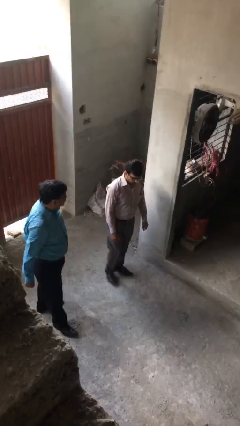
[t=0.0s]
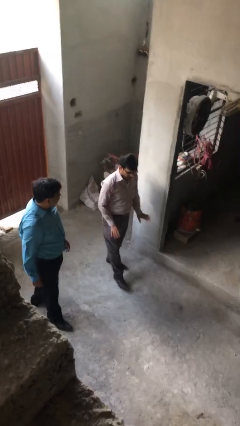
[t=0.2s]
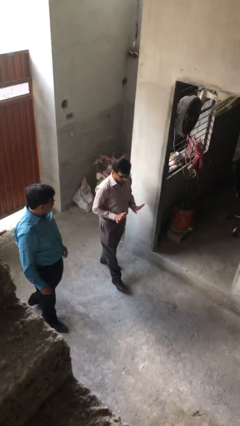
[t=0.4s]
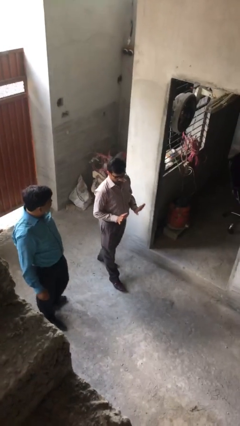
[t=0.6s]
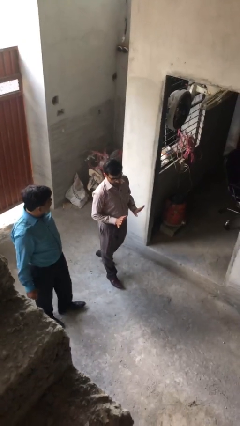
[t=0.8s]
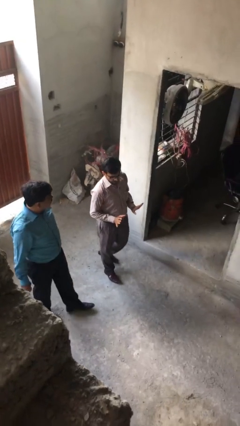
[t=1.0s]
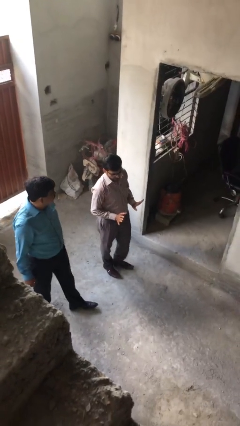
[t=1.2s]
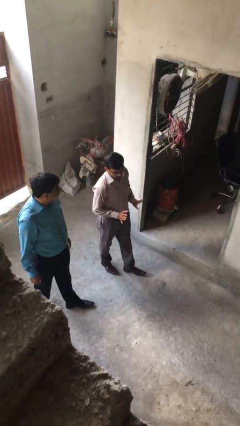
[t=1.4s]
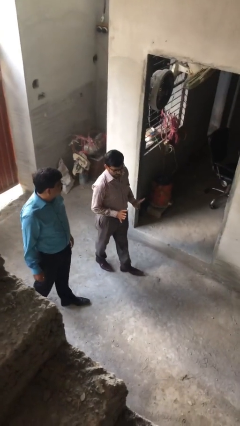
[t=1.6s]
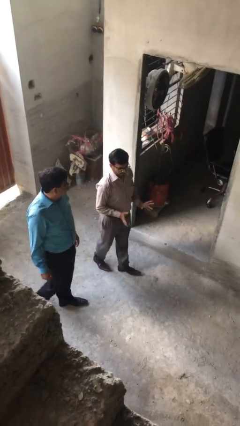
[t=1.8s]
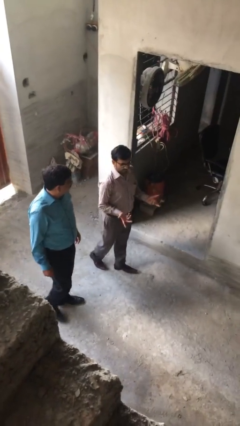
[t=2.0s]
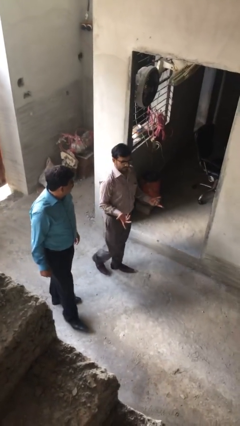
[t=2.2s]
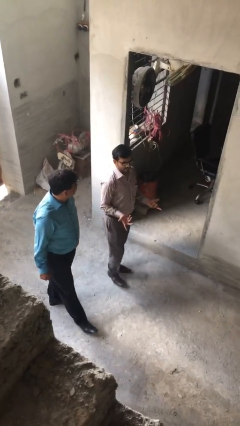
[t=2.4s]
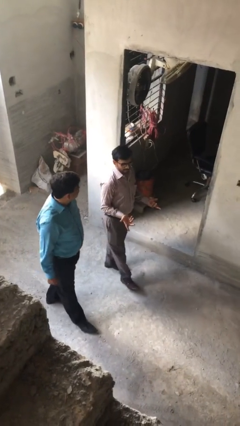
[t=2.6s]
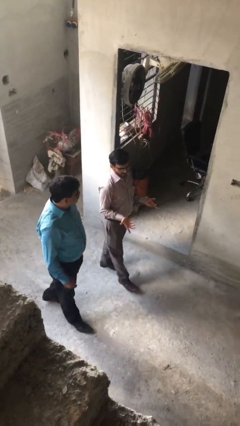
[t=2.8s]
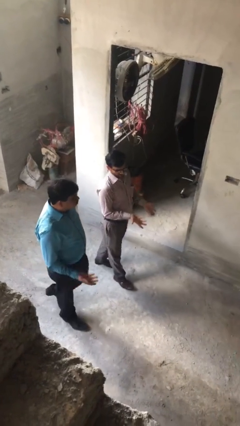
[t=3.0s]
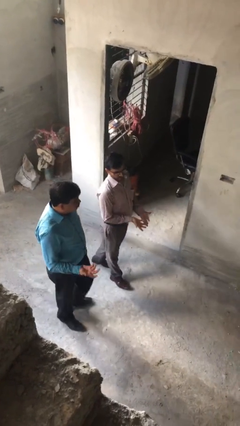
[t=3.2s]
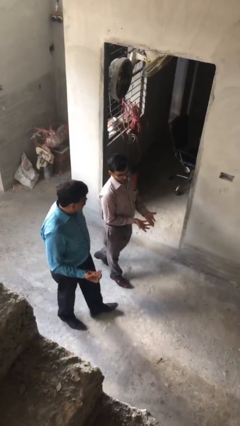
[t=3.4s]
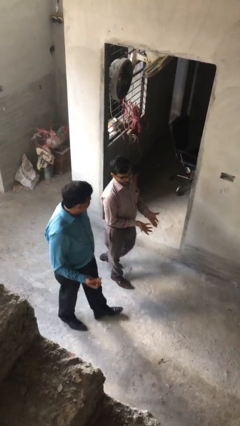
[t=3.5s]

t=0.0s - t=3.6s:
person talks to person

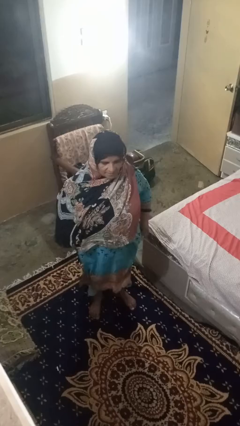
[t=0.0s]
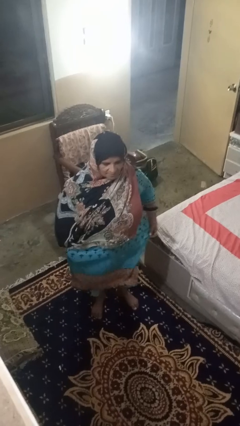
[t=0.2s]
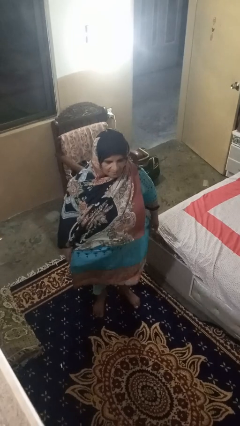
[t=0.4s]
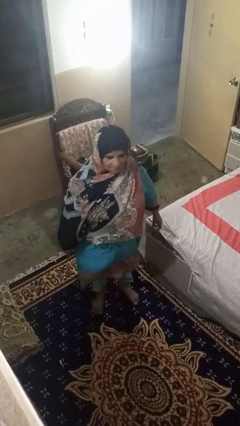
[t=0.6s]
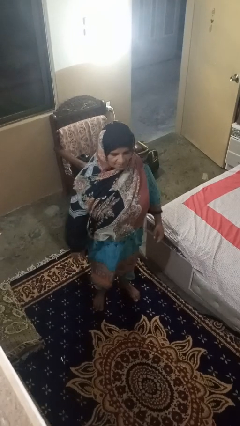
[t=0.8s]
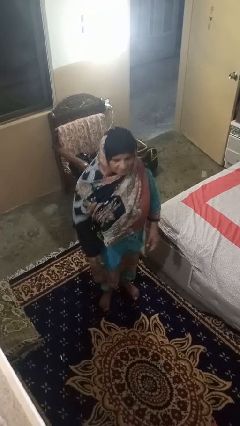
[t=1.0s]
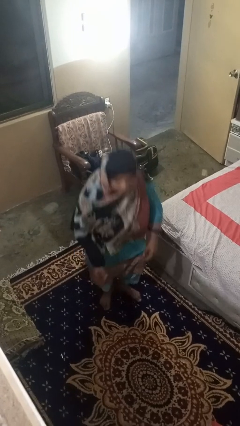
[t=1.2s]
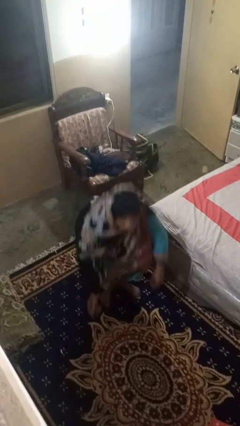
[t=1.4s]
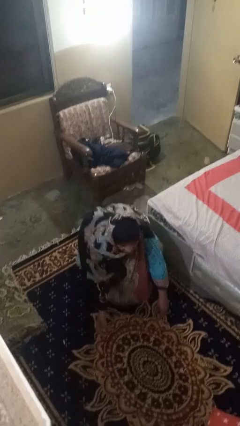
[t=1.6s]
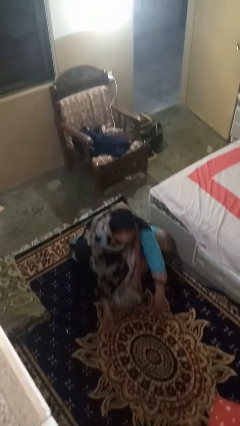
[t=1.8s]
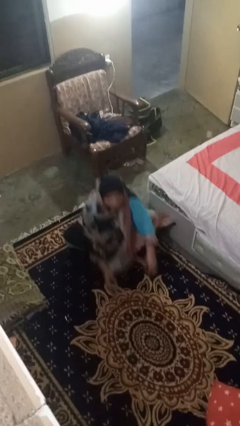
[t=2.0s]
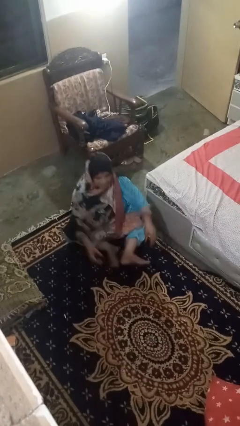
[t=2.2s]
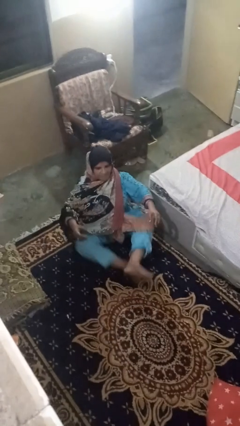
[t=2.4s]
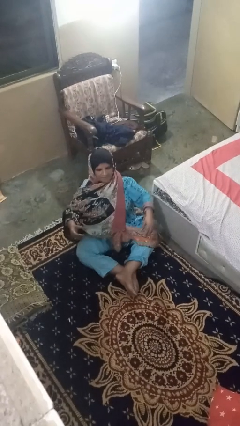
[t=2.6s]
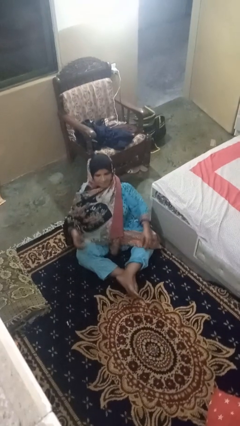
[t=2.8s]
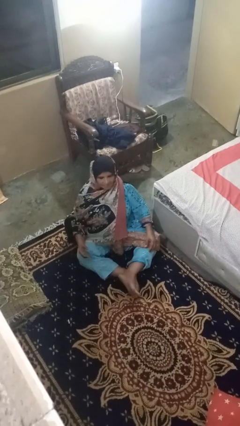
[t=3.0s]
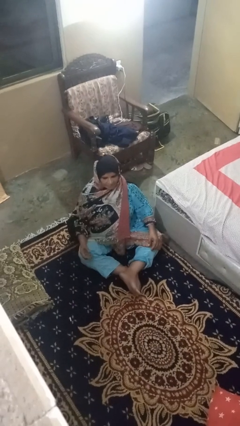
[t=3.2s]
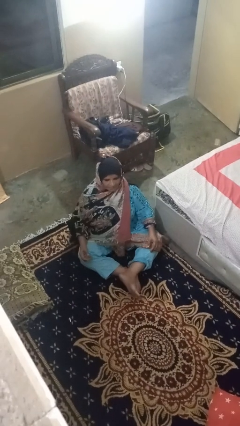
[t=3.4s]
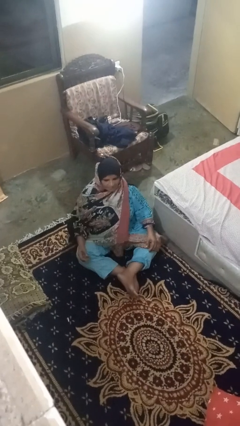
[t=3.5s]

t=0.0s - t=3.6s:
person sits crisscross

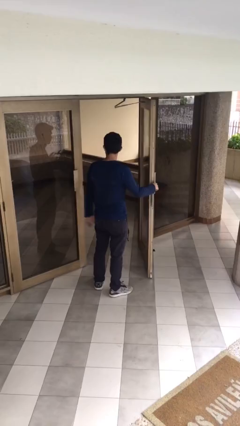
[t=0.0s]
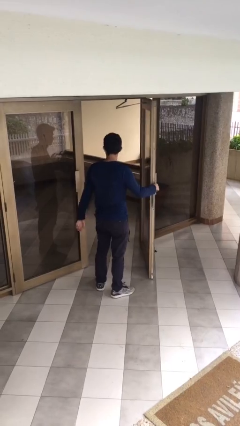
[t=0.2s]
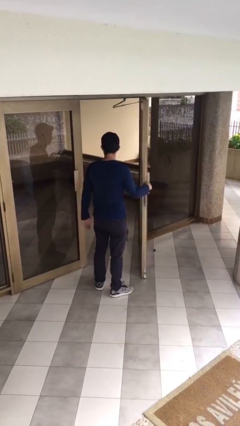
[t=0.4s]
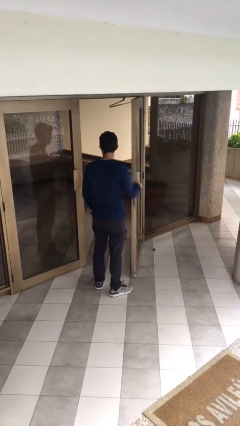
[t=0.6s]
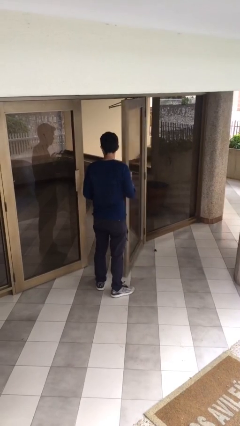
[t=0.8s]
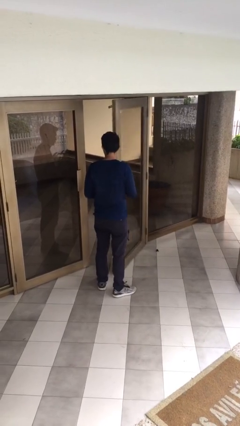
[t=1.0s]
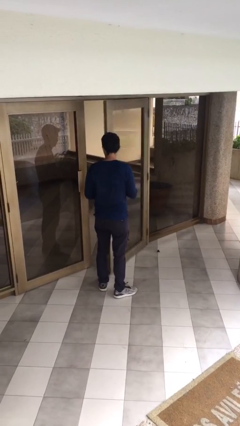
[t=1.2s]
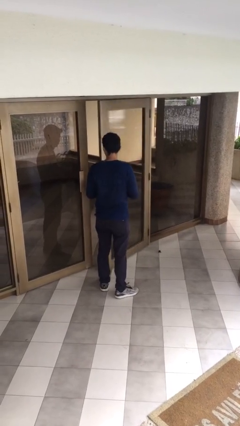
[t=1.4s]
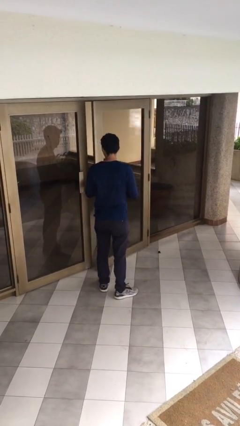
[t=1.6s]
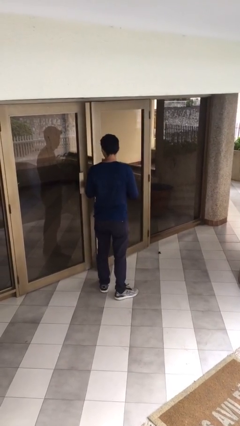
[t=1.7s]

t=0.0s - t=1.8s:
person closes facility door

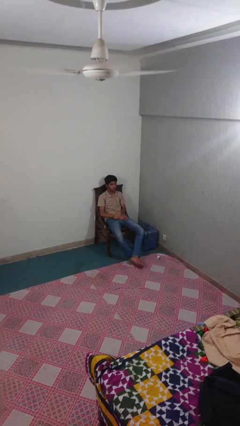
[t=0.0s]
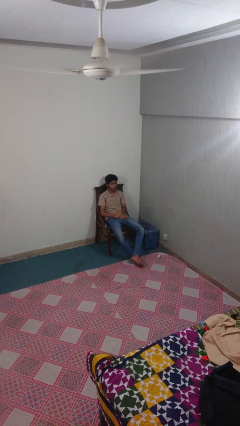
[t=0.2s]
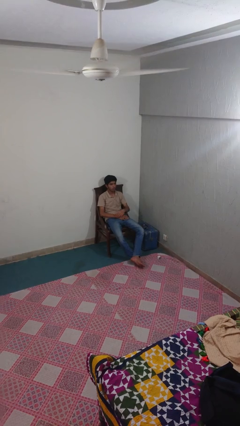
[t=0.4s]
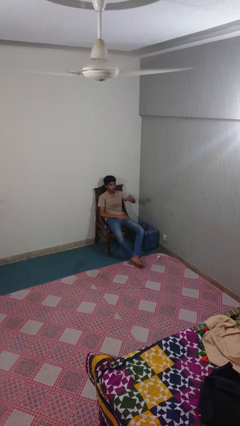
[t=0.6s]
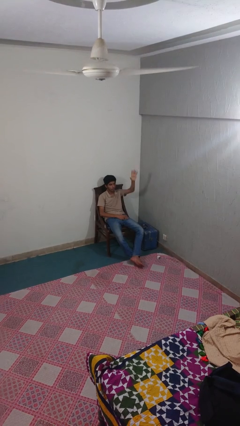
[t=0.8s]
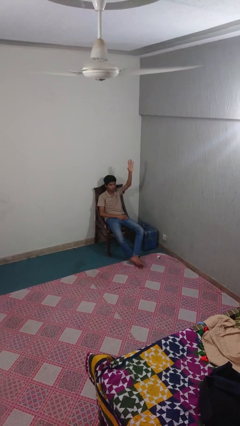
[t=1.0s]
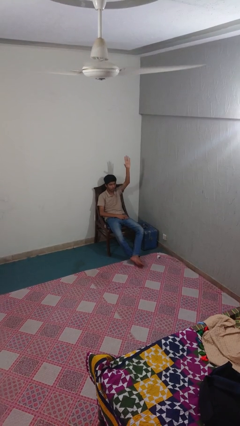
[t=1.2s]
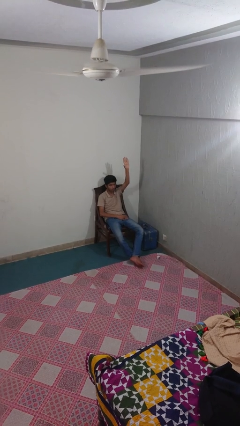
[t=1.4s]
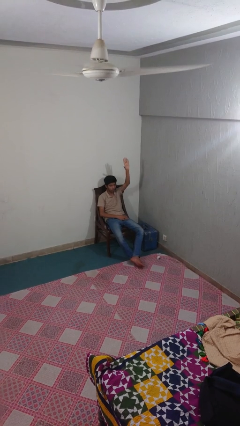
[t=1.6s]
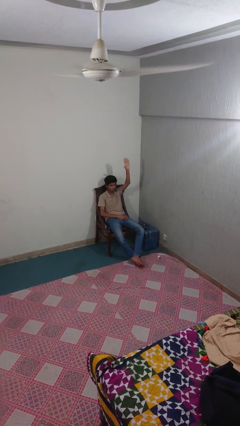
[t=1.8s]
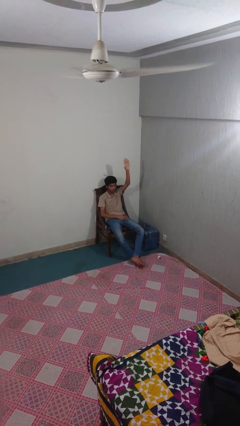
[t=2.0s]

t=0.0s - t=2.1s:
person gestures raise hand

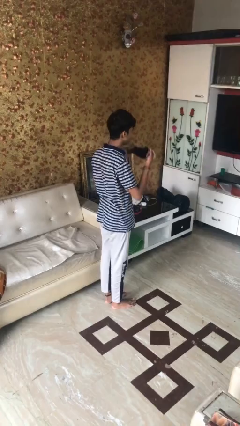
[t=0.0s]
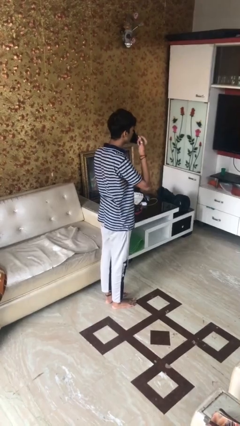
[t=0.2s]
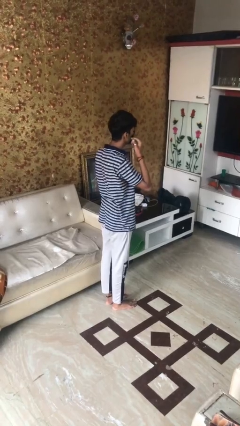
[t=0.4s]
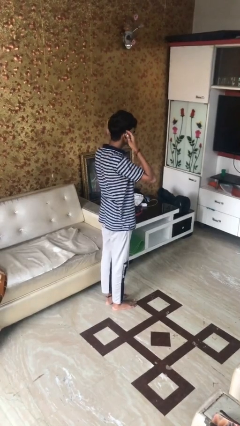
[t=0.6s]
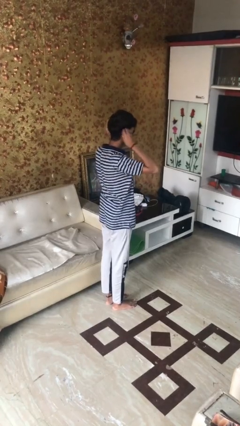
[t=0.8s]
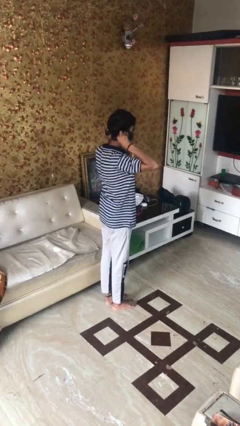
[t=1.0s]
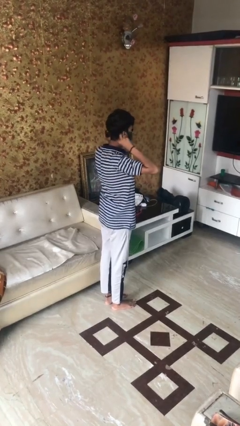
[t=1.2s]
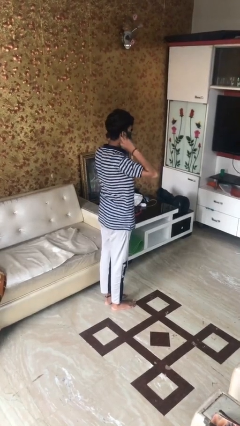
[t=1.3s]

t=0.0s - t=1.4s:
person puts on facemask

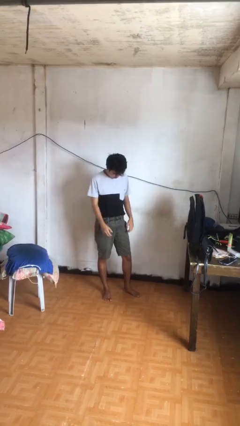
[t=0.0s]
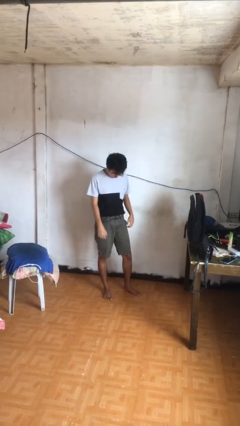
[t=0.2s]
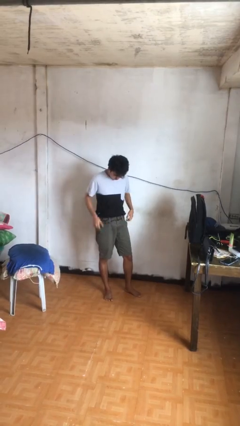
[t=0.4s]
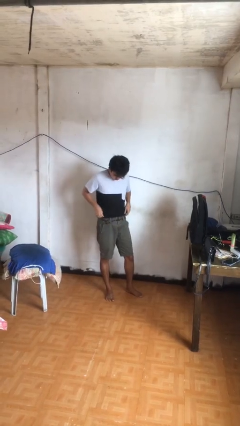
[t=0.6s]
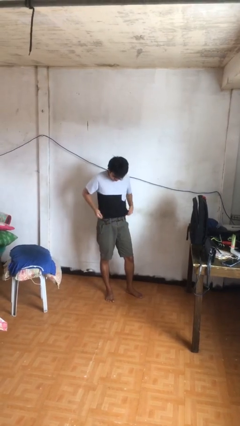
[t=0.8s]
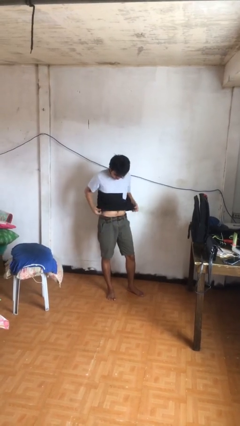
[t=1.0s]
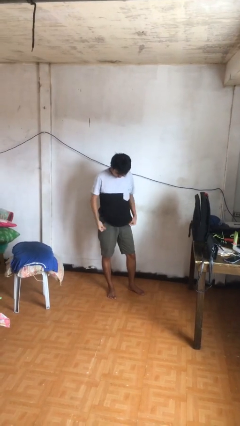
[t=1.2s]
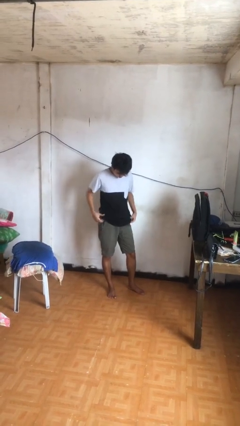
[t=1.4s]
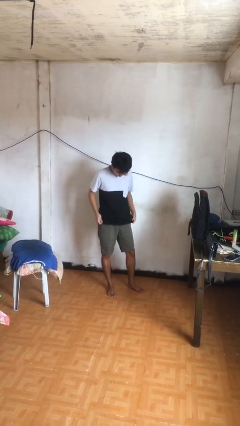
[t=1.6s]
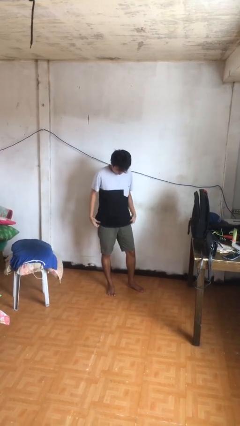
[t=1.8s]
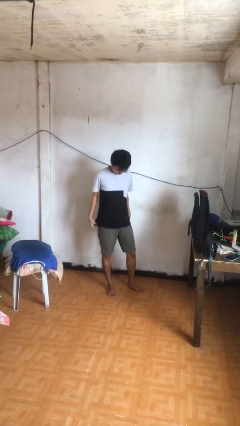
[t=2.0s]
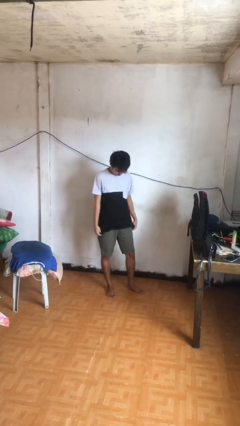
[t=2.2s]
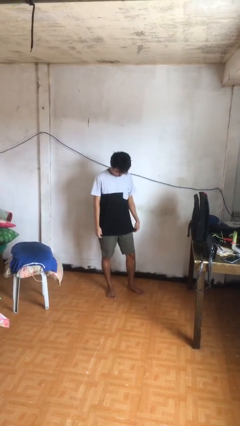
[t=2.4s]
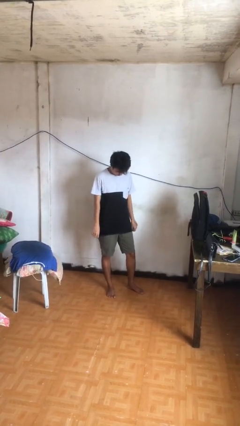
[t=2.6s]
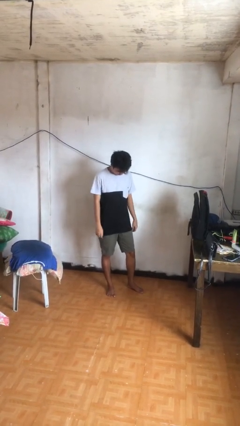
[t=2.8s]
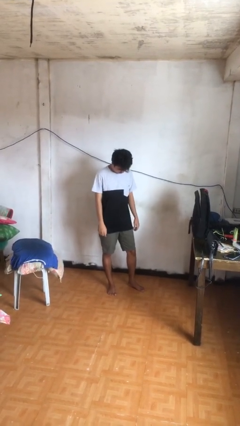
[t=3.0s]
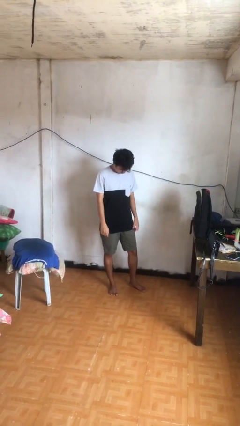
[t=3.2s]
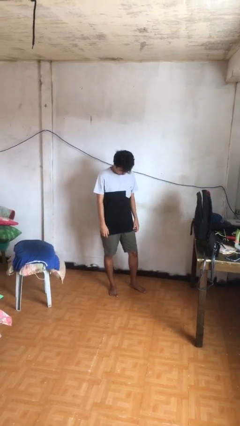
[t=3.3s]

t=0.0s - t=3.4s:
person untucks shirt

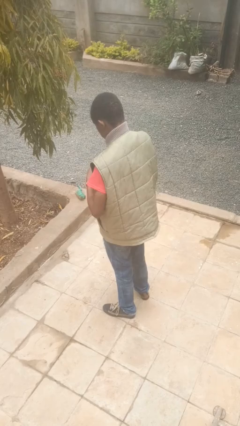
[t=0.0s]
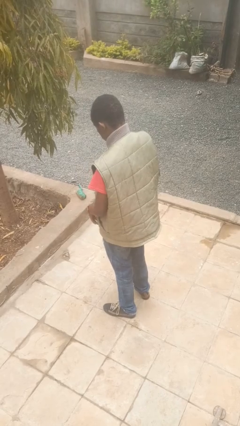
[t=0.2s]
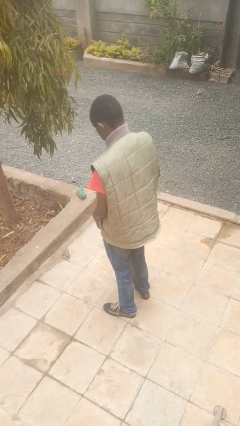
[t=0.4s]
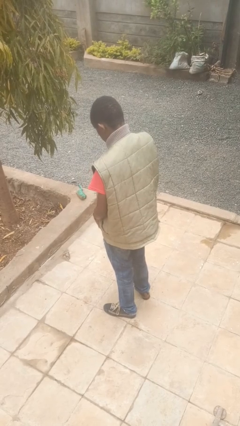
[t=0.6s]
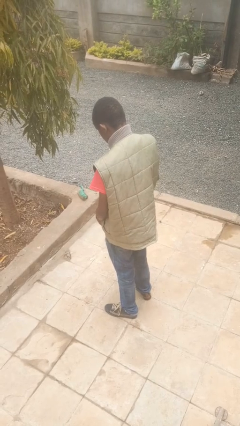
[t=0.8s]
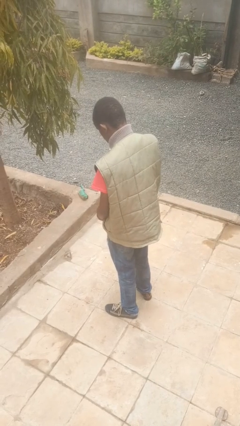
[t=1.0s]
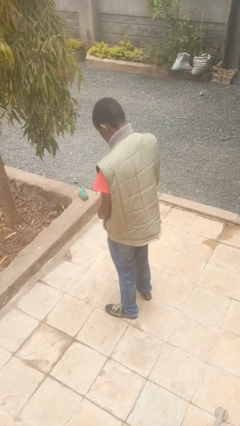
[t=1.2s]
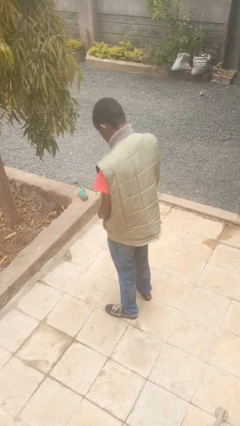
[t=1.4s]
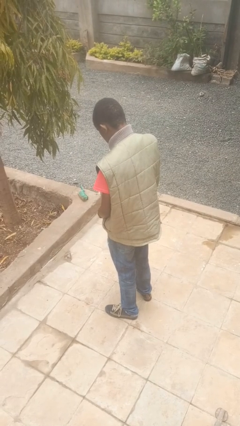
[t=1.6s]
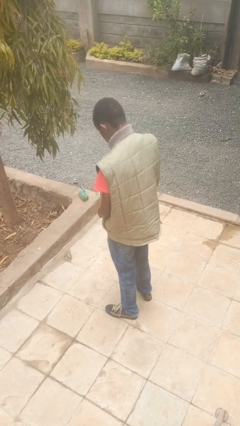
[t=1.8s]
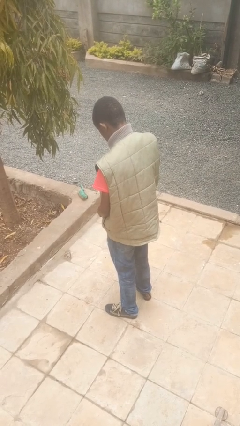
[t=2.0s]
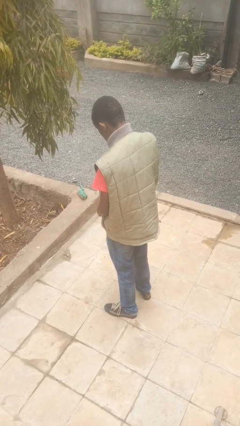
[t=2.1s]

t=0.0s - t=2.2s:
person zips up jacket
